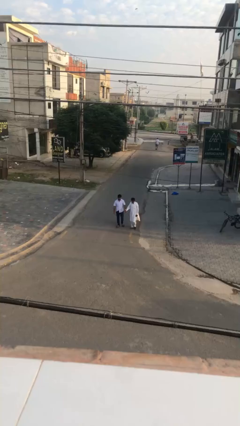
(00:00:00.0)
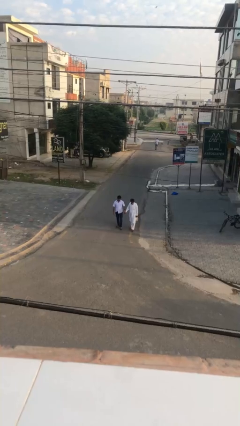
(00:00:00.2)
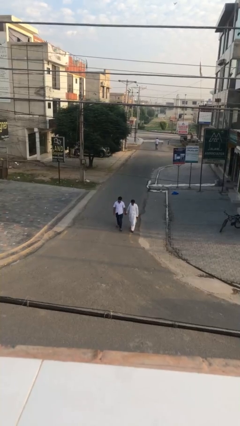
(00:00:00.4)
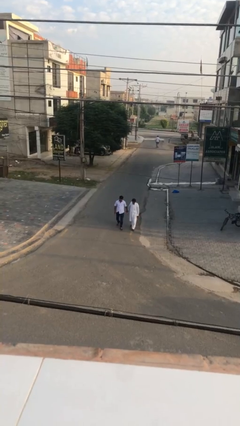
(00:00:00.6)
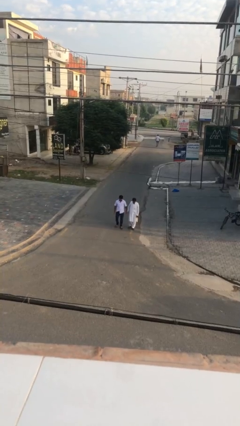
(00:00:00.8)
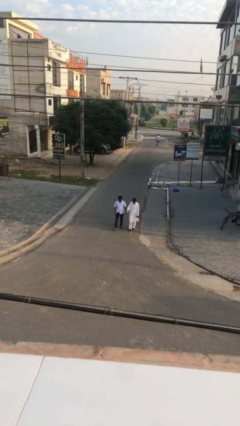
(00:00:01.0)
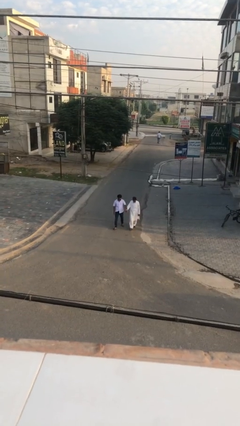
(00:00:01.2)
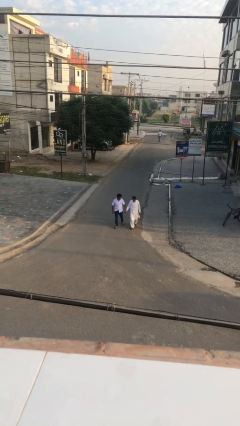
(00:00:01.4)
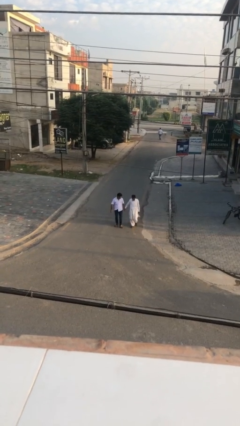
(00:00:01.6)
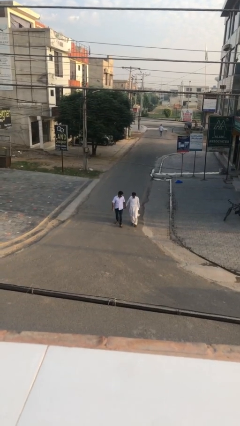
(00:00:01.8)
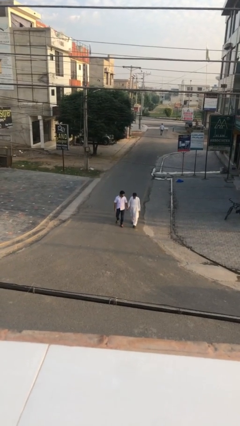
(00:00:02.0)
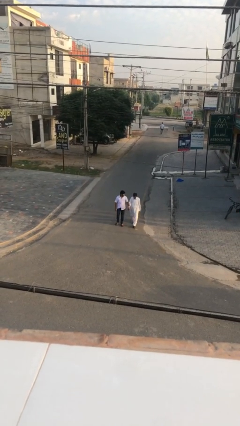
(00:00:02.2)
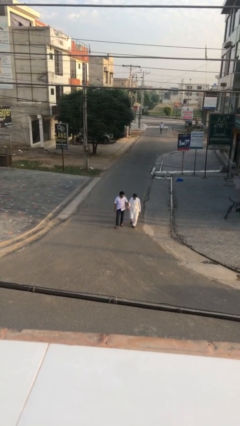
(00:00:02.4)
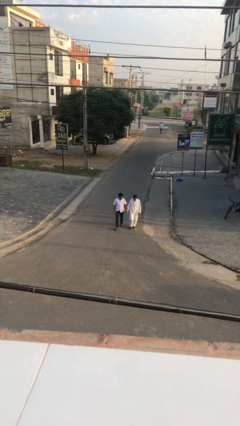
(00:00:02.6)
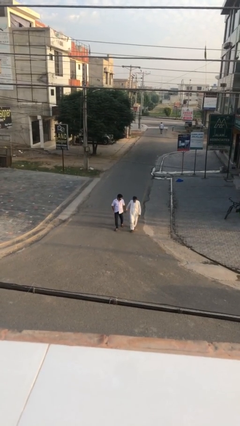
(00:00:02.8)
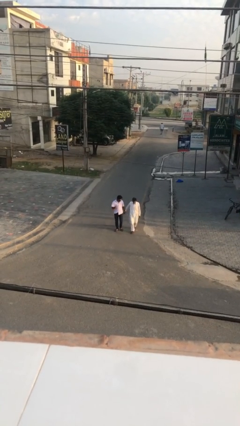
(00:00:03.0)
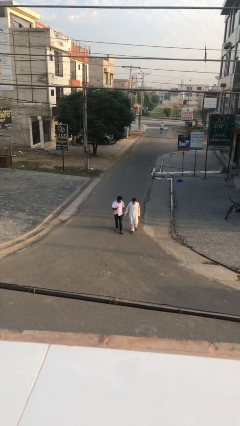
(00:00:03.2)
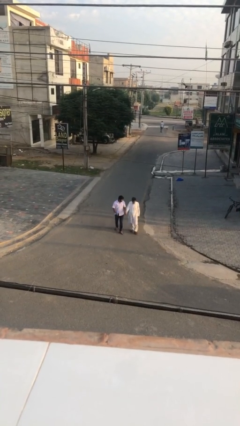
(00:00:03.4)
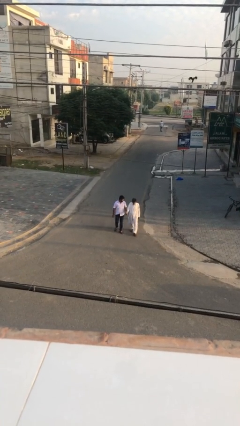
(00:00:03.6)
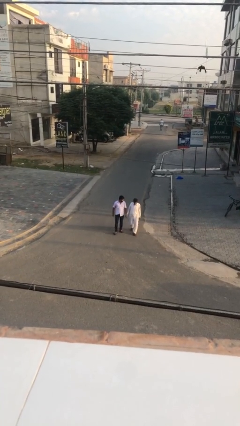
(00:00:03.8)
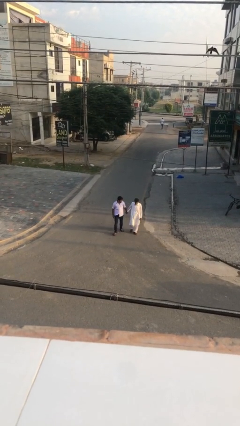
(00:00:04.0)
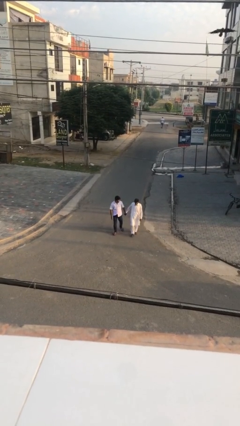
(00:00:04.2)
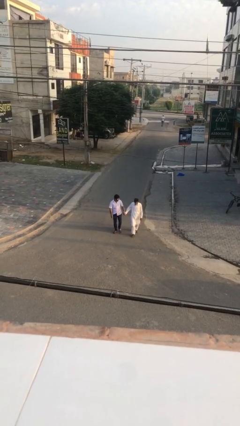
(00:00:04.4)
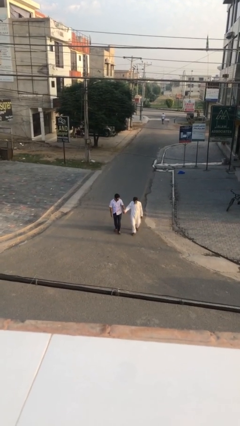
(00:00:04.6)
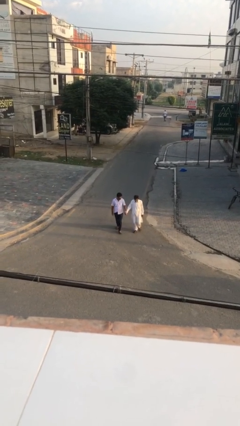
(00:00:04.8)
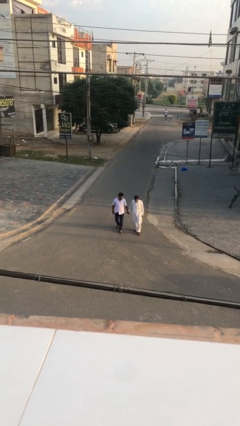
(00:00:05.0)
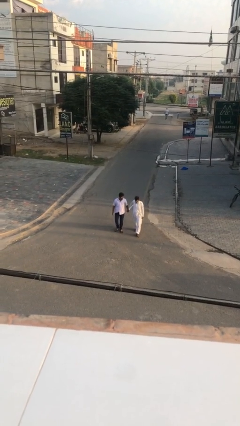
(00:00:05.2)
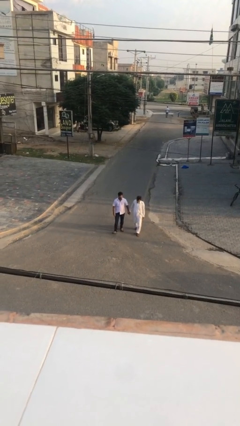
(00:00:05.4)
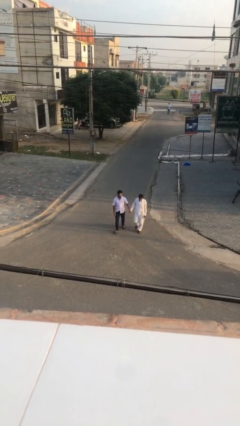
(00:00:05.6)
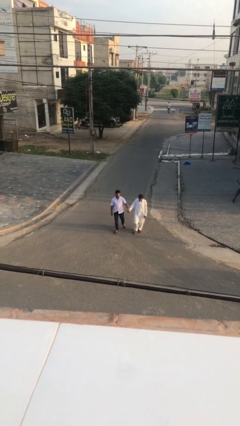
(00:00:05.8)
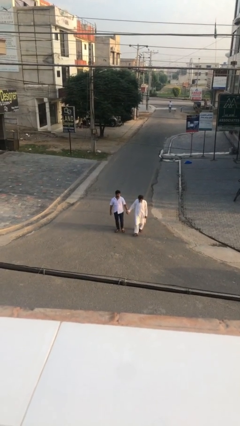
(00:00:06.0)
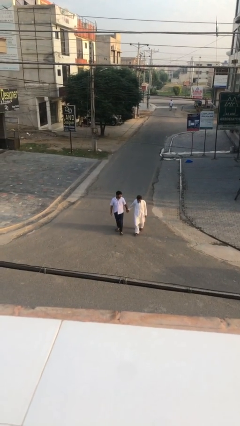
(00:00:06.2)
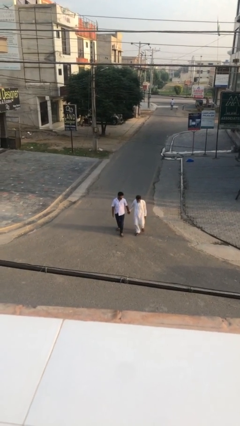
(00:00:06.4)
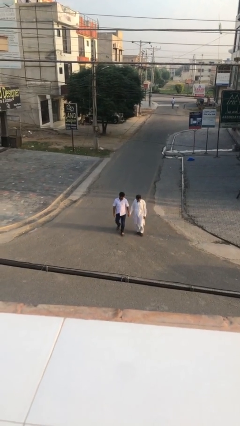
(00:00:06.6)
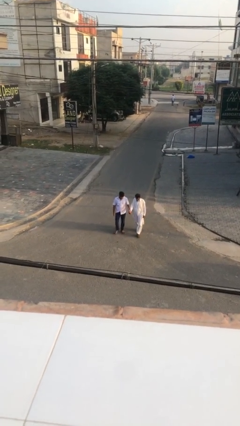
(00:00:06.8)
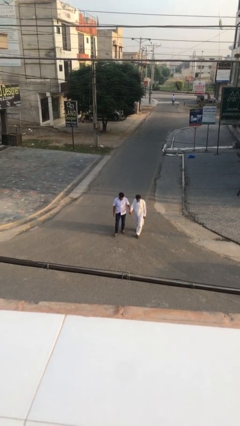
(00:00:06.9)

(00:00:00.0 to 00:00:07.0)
person holds hand

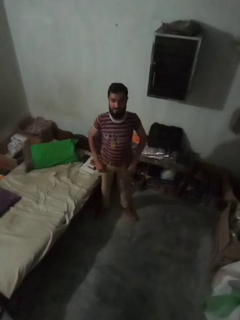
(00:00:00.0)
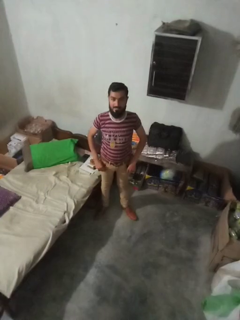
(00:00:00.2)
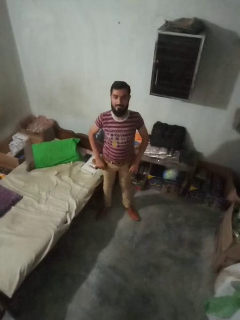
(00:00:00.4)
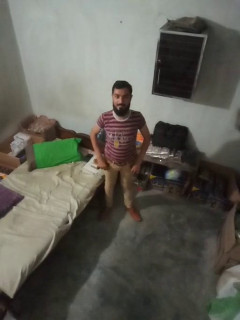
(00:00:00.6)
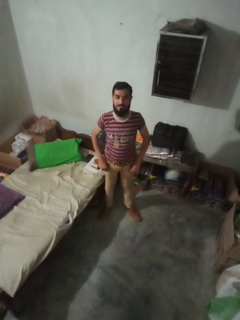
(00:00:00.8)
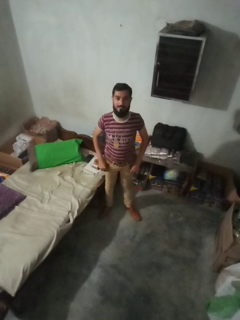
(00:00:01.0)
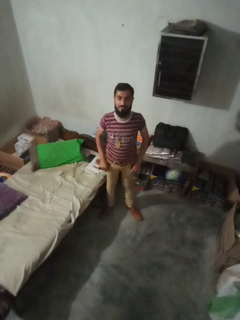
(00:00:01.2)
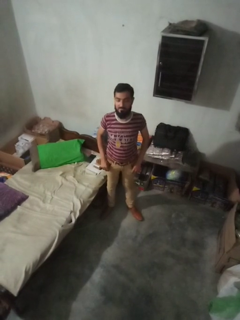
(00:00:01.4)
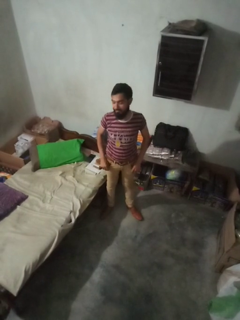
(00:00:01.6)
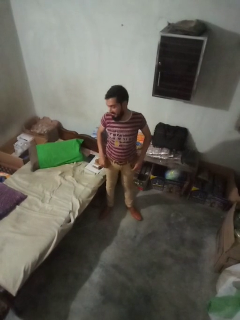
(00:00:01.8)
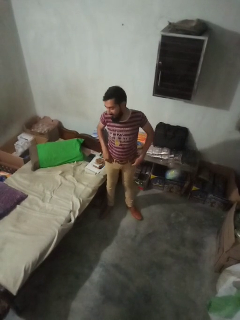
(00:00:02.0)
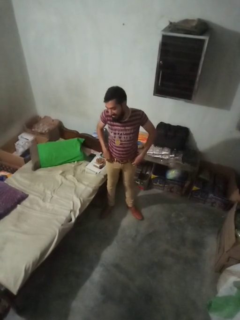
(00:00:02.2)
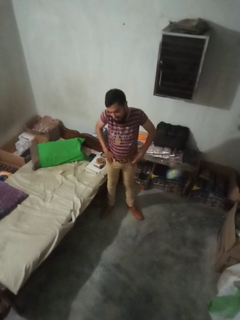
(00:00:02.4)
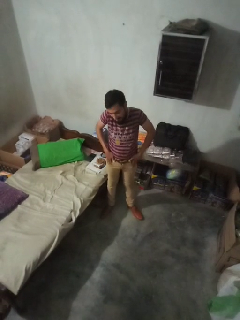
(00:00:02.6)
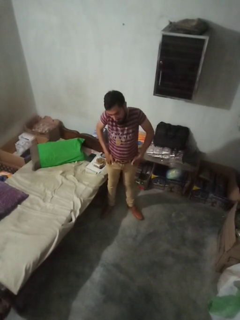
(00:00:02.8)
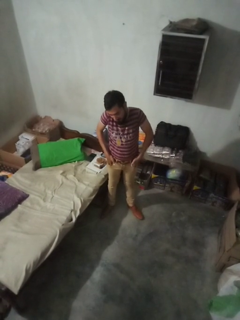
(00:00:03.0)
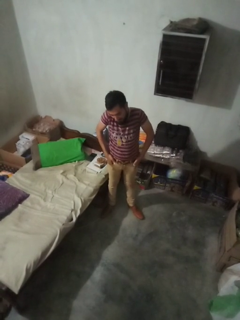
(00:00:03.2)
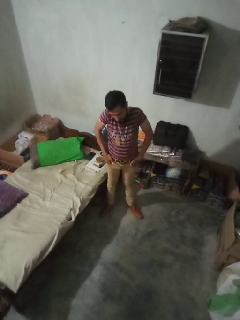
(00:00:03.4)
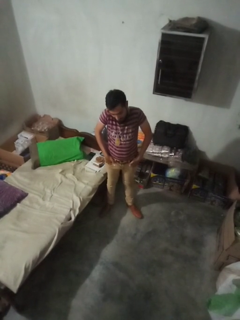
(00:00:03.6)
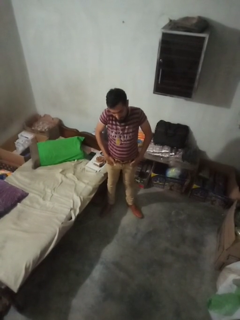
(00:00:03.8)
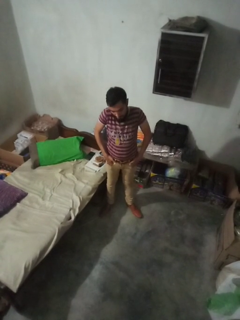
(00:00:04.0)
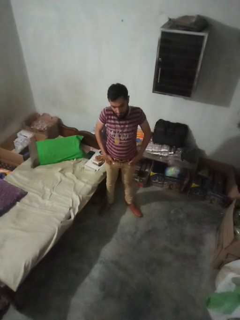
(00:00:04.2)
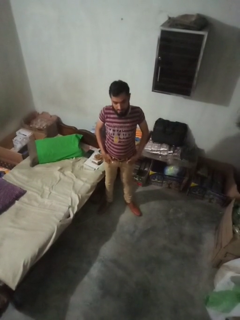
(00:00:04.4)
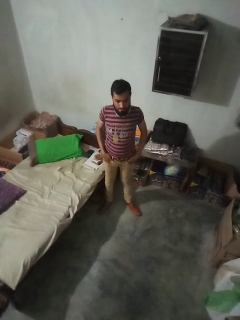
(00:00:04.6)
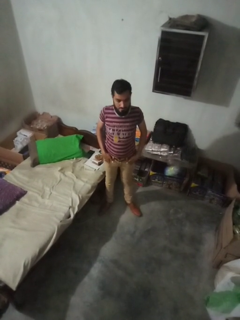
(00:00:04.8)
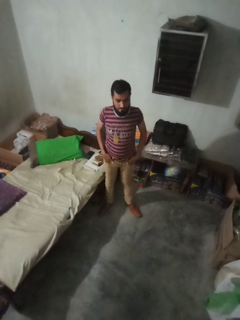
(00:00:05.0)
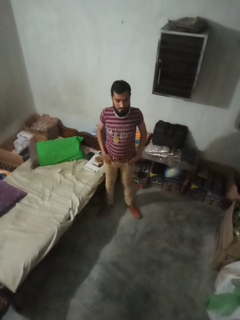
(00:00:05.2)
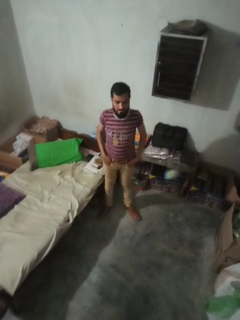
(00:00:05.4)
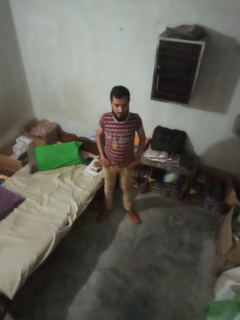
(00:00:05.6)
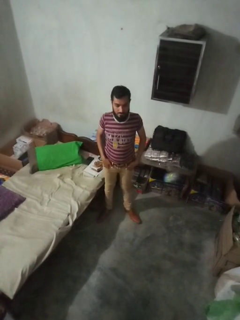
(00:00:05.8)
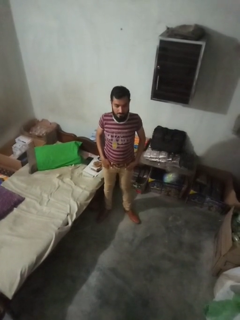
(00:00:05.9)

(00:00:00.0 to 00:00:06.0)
person puts hands in back pockets

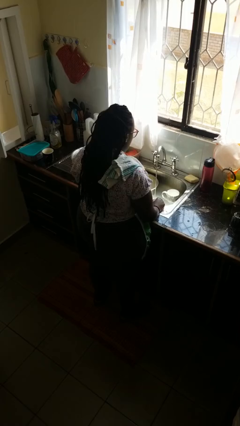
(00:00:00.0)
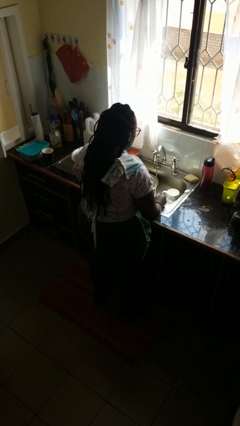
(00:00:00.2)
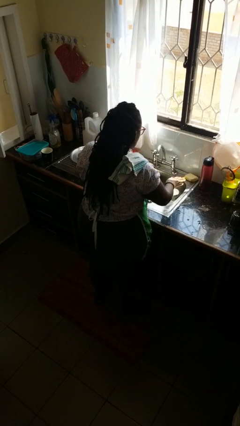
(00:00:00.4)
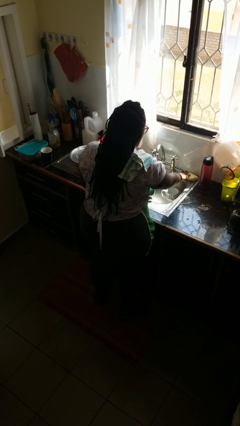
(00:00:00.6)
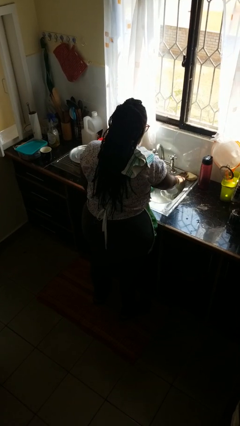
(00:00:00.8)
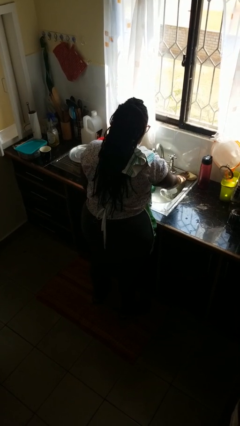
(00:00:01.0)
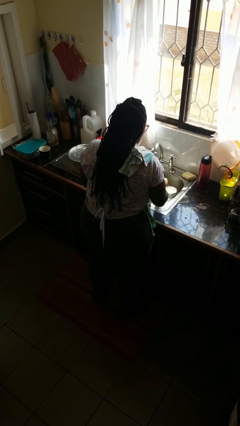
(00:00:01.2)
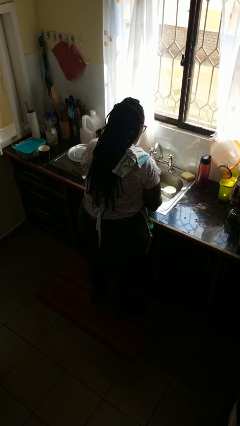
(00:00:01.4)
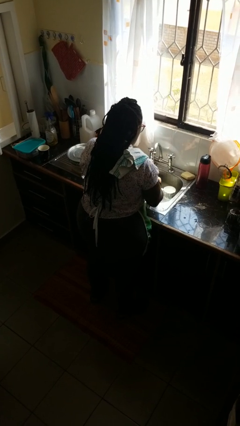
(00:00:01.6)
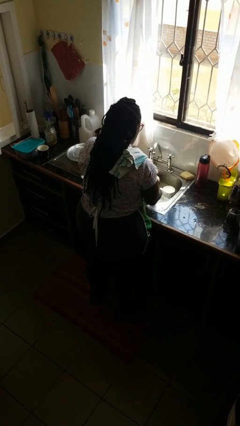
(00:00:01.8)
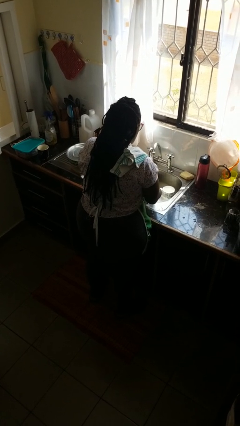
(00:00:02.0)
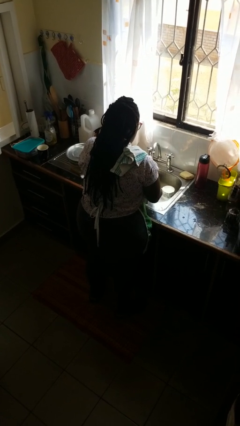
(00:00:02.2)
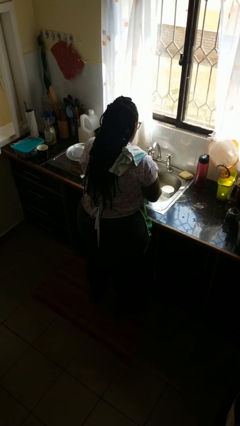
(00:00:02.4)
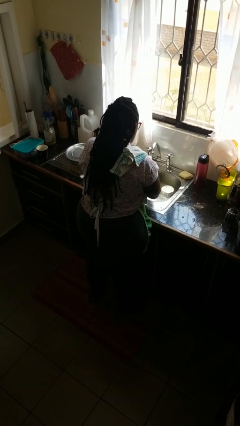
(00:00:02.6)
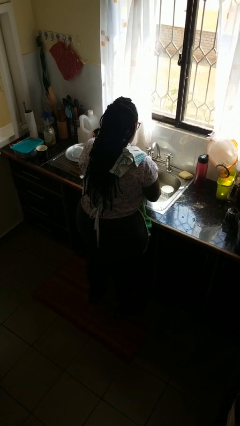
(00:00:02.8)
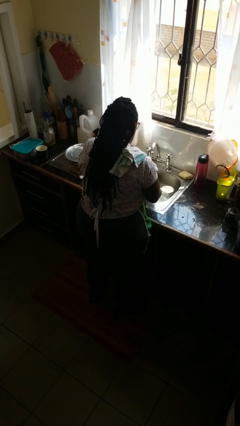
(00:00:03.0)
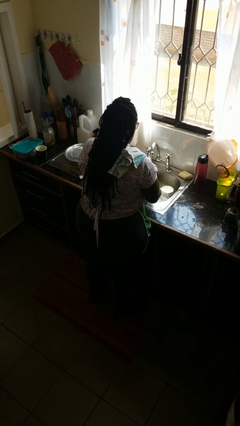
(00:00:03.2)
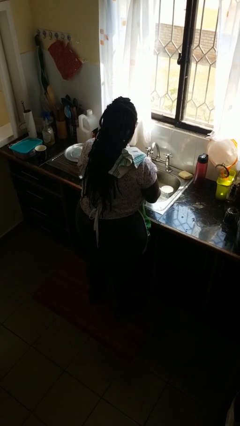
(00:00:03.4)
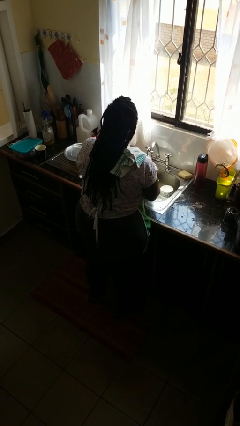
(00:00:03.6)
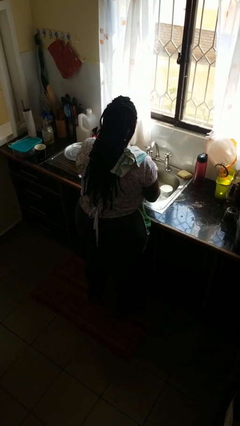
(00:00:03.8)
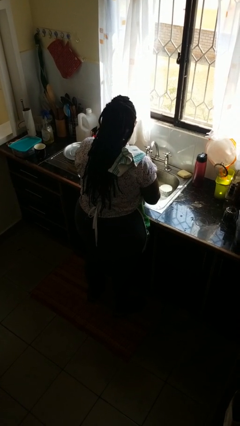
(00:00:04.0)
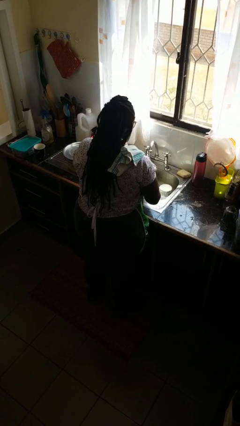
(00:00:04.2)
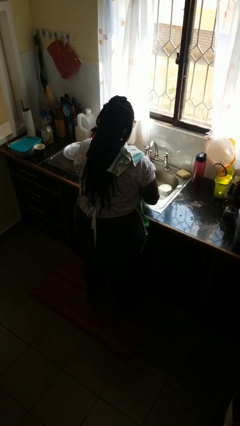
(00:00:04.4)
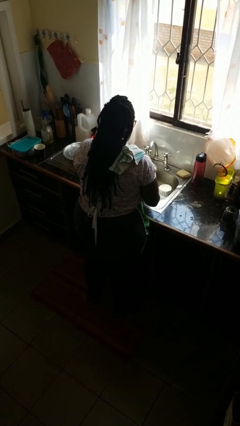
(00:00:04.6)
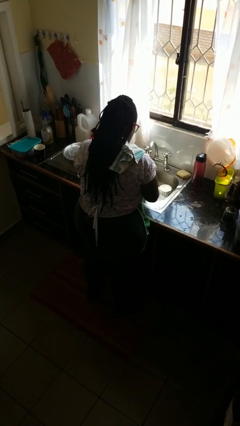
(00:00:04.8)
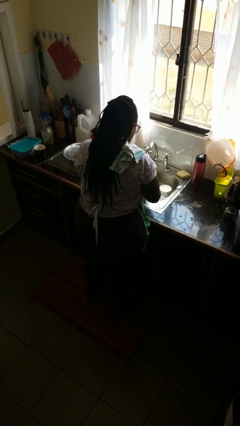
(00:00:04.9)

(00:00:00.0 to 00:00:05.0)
person washes hands

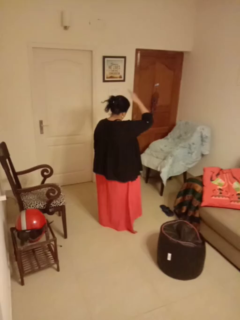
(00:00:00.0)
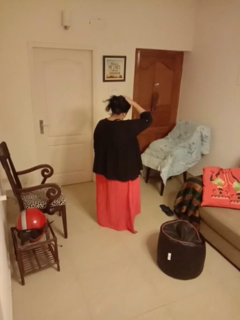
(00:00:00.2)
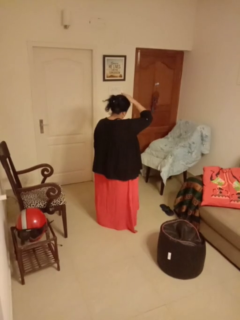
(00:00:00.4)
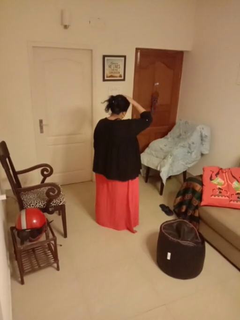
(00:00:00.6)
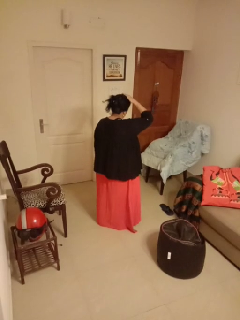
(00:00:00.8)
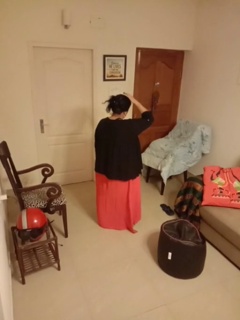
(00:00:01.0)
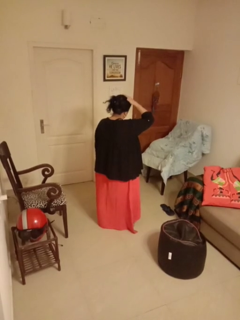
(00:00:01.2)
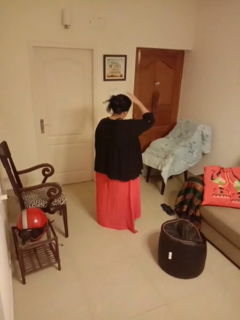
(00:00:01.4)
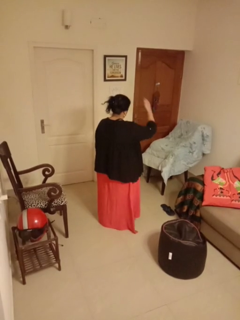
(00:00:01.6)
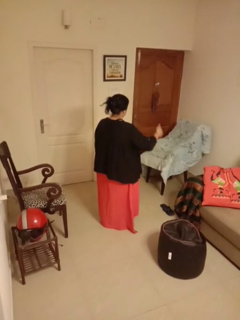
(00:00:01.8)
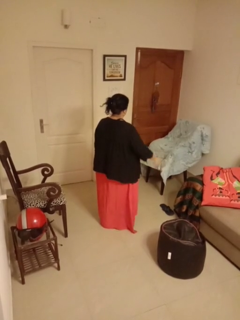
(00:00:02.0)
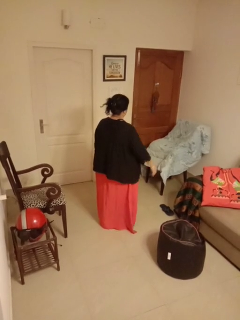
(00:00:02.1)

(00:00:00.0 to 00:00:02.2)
person pats head
